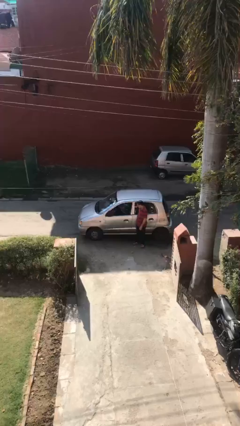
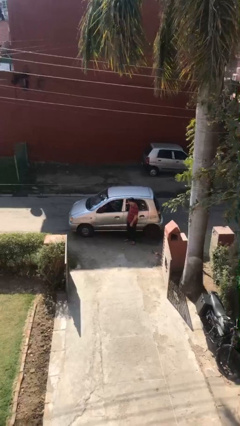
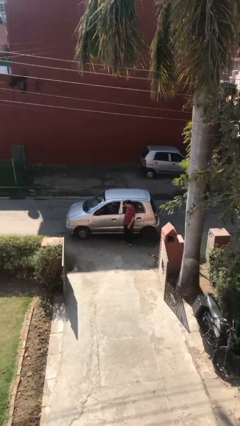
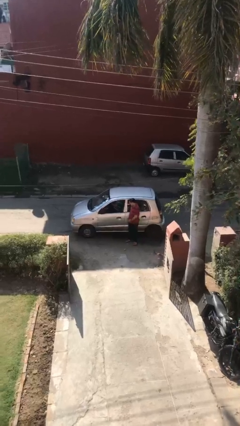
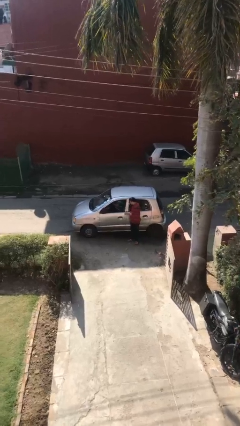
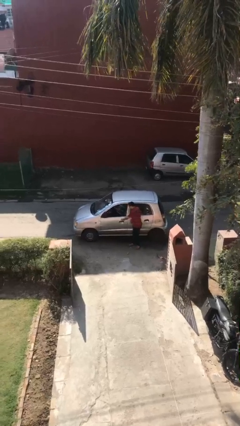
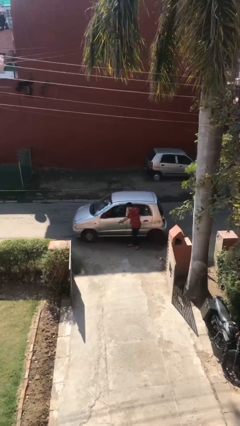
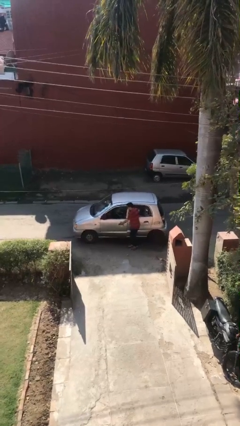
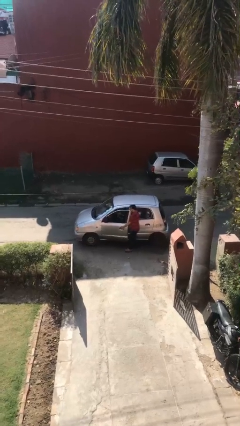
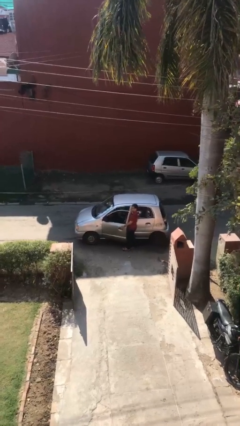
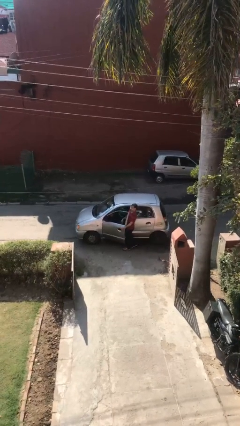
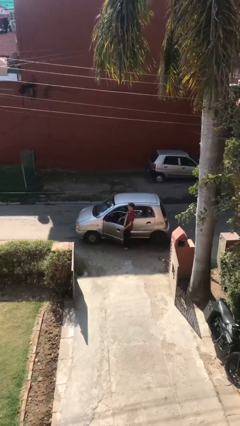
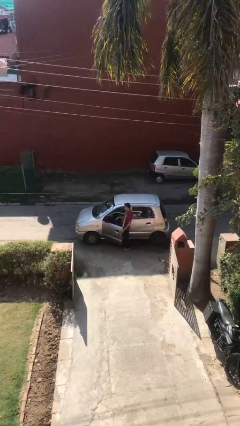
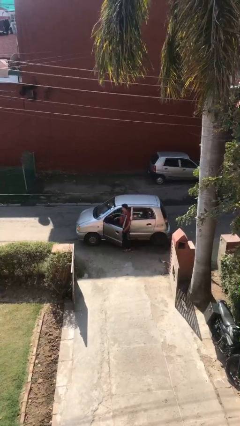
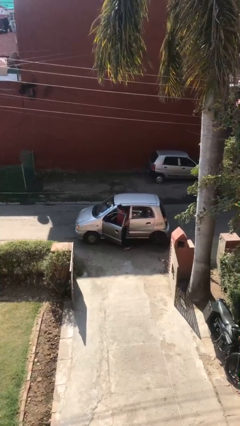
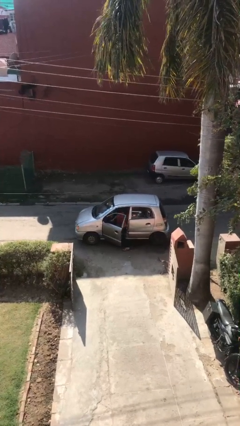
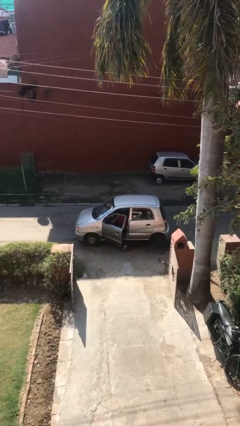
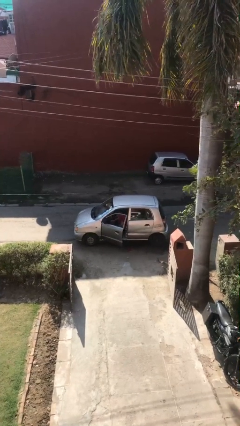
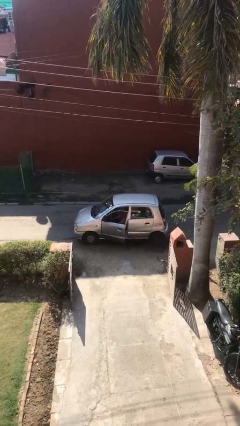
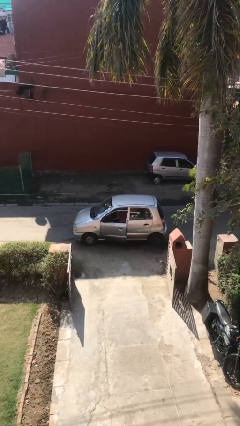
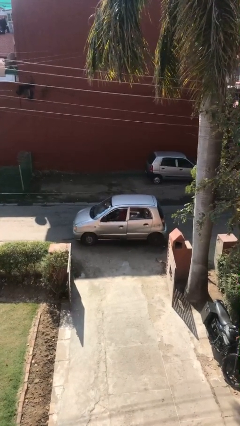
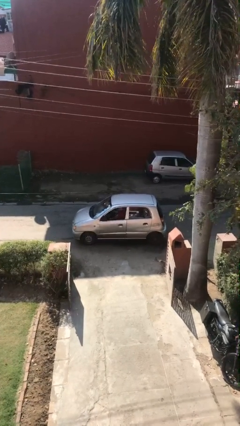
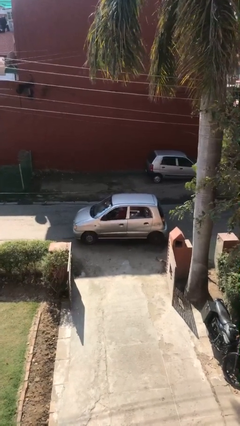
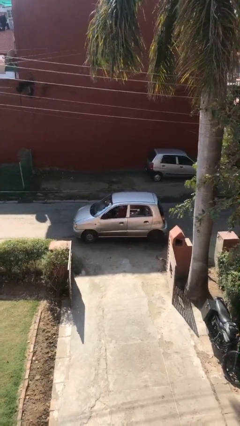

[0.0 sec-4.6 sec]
car picks up person

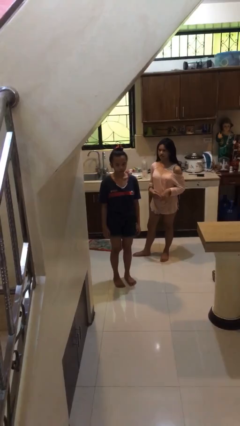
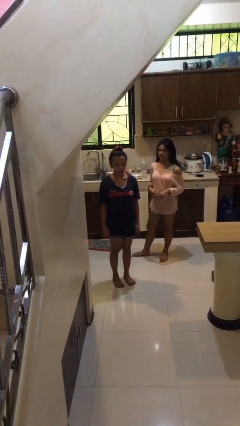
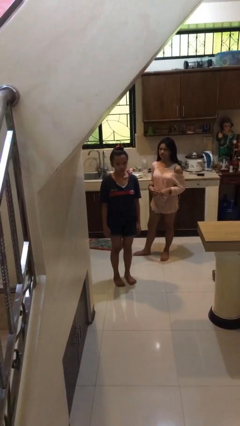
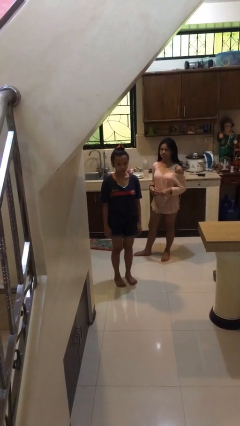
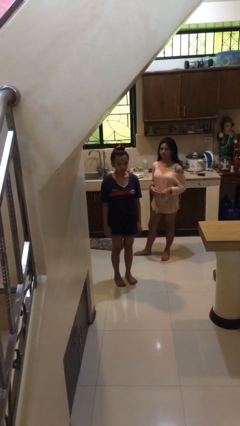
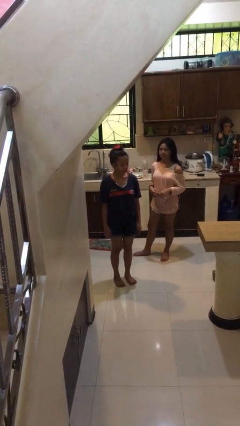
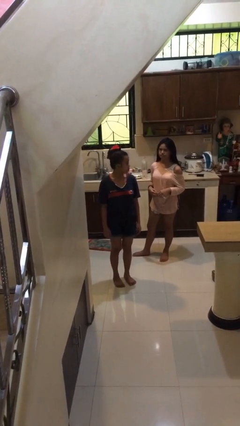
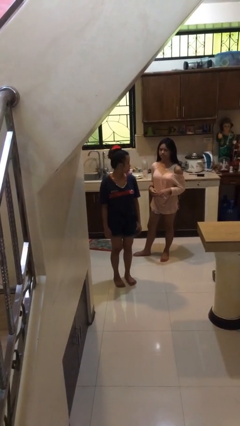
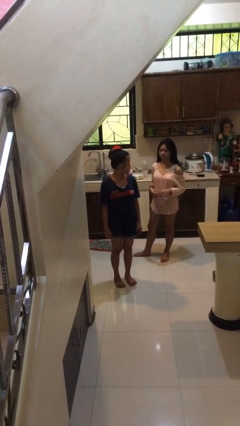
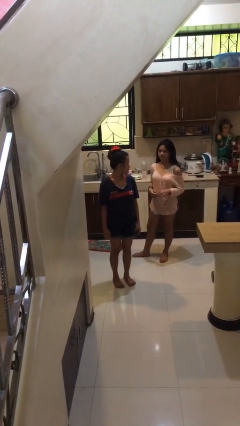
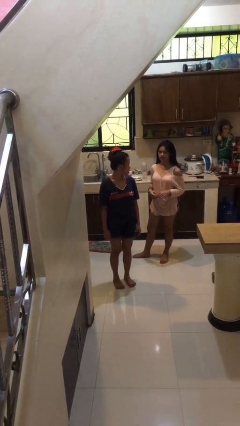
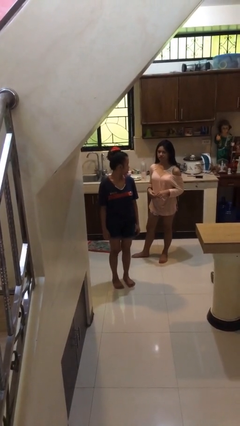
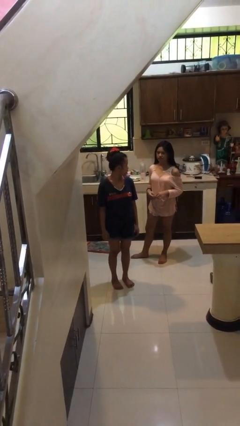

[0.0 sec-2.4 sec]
person looks over shoulder

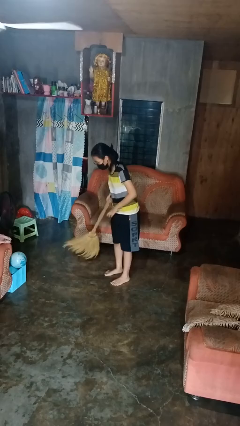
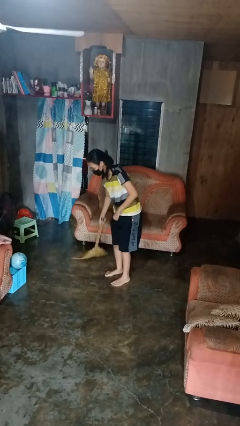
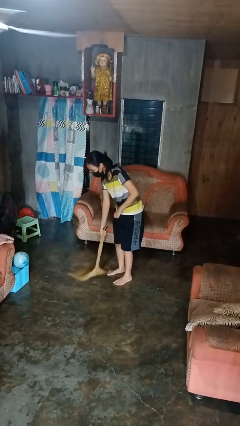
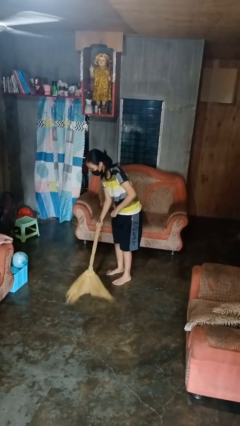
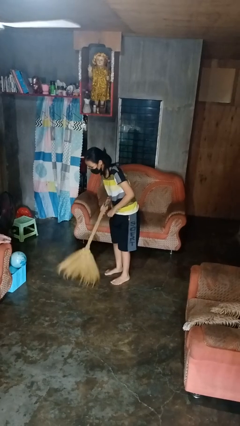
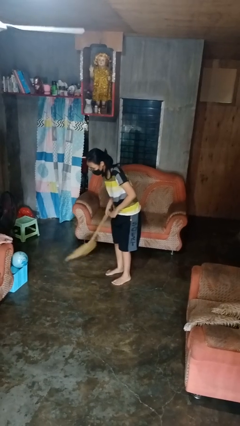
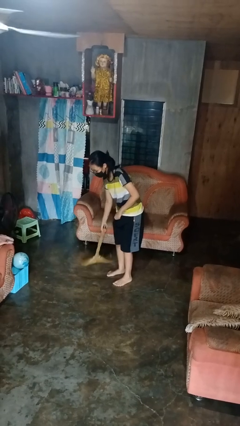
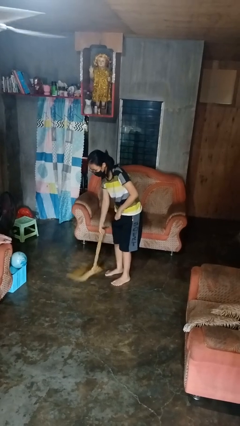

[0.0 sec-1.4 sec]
person sweeps floor

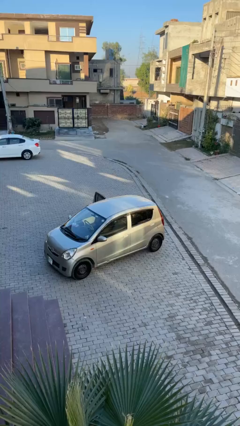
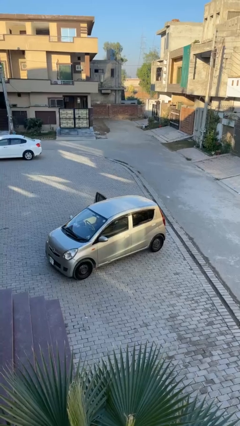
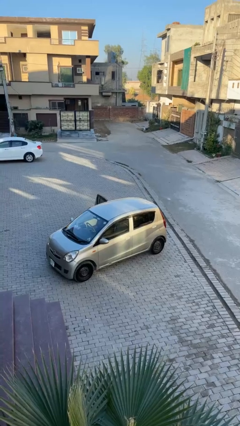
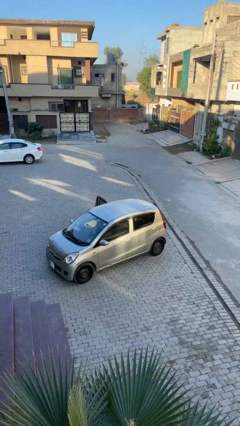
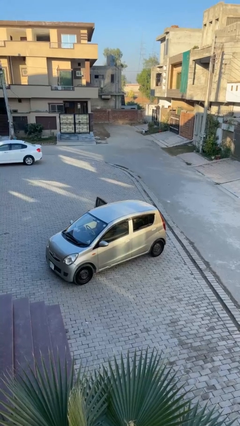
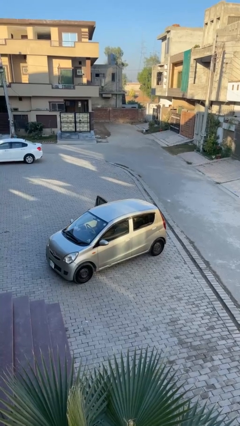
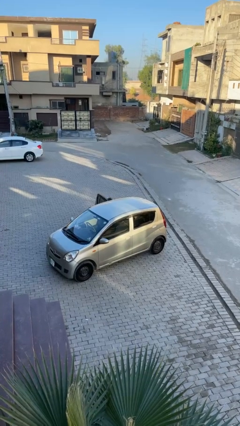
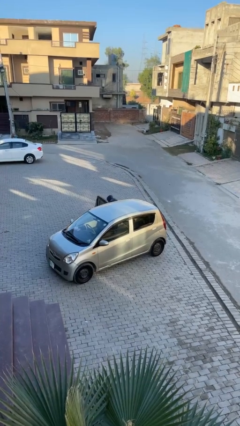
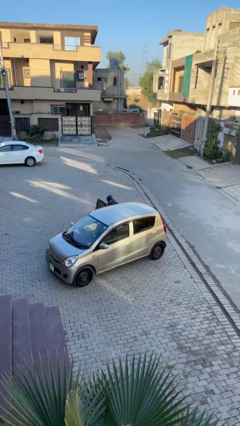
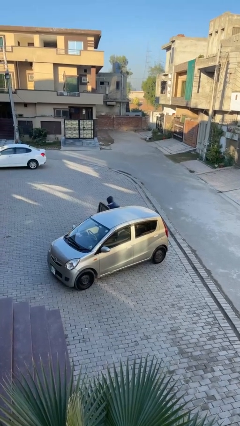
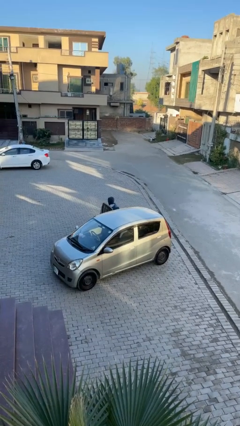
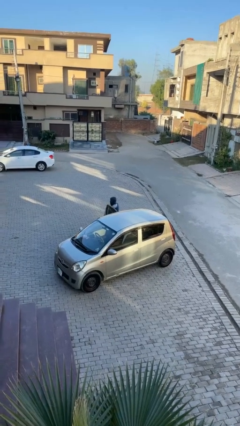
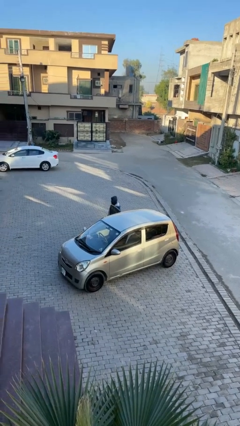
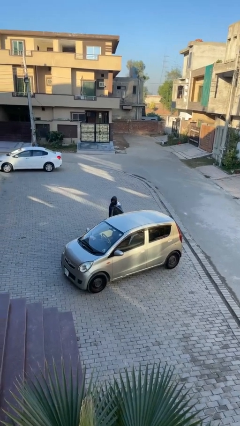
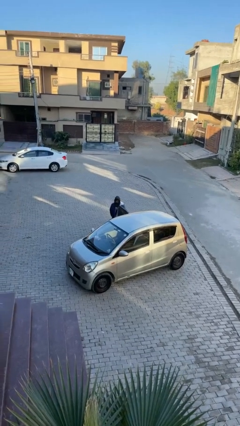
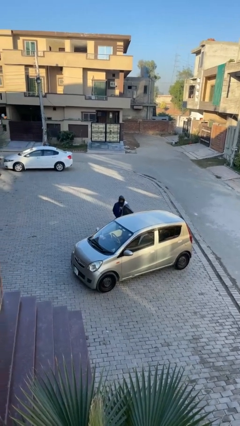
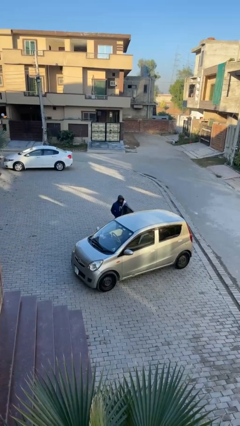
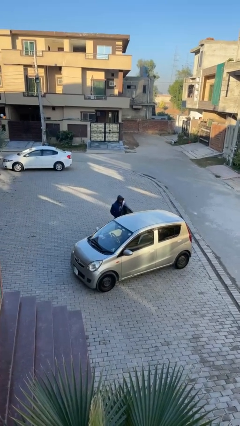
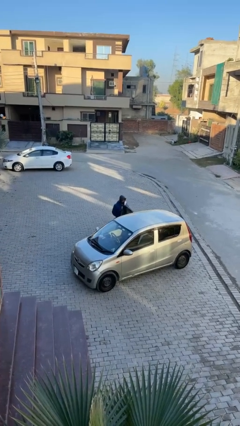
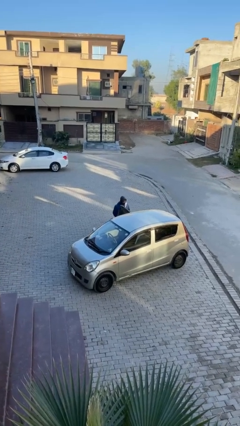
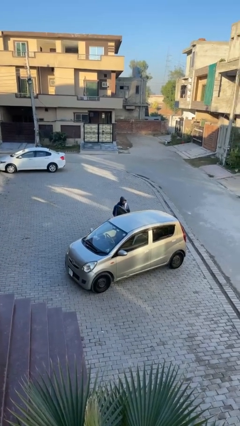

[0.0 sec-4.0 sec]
person exits car

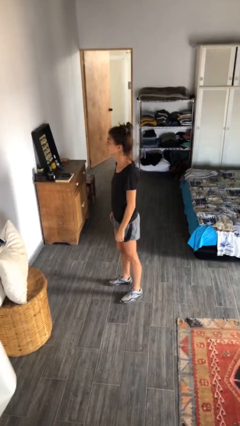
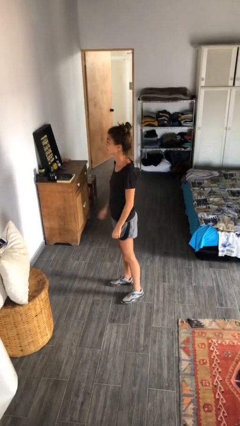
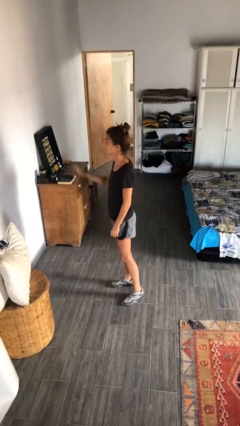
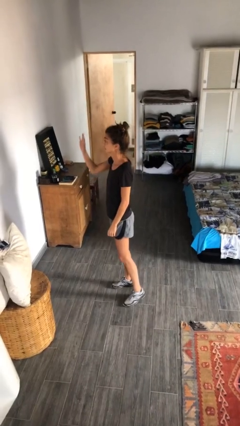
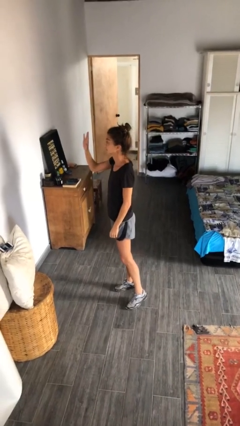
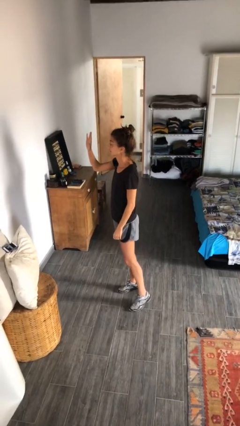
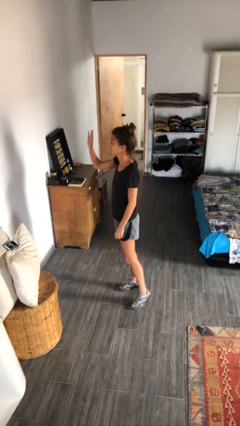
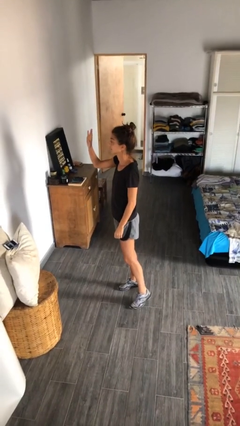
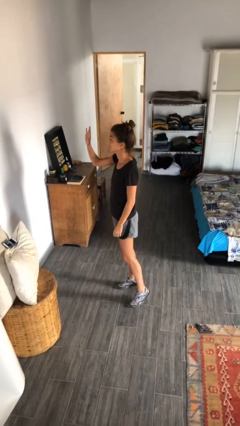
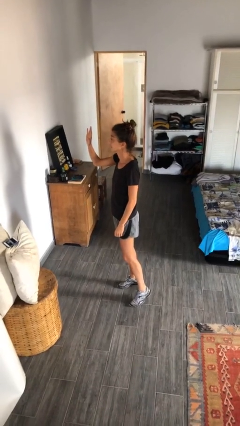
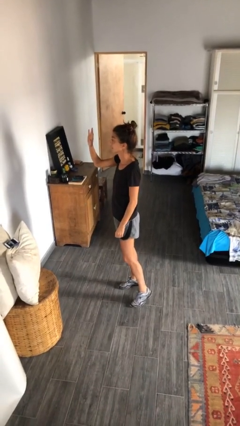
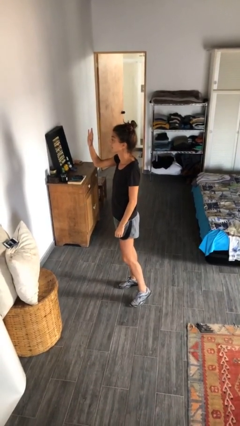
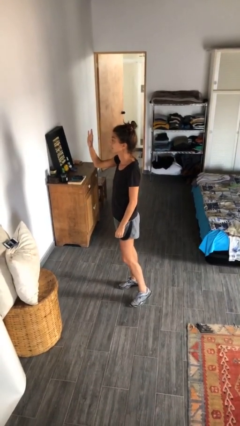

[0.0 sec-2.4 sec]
person gestures raise hand

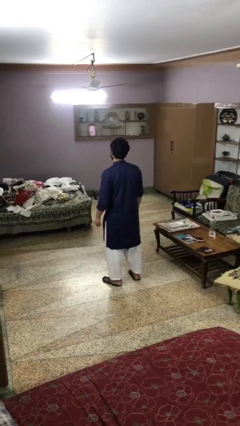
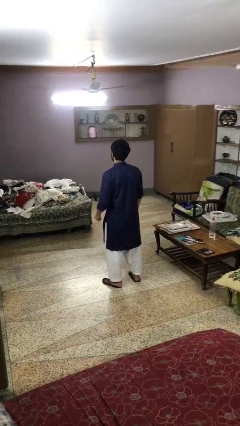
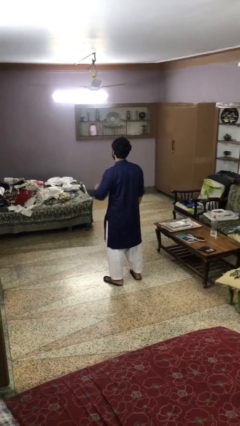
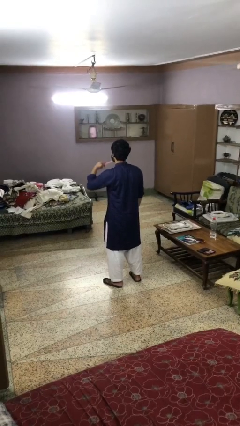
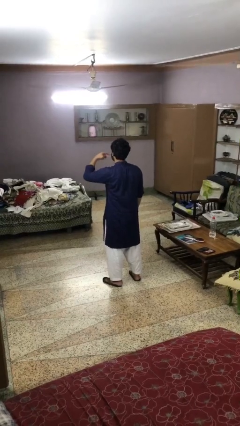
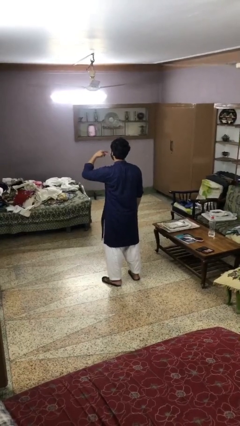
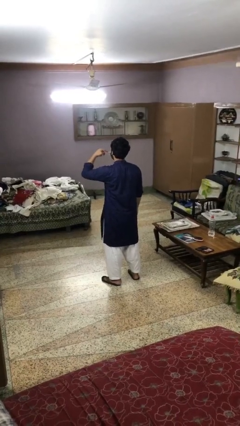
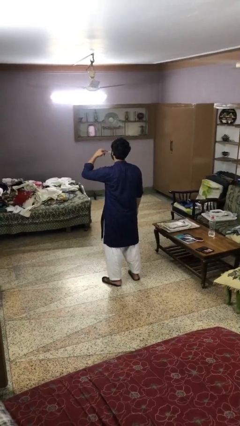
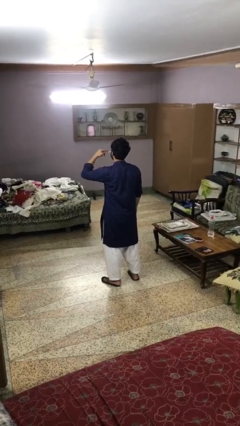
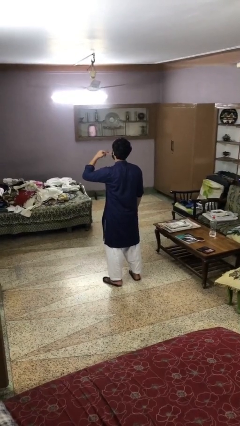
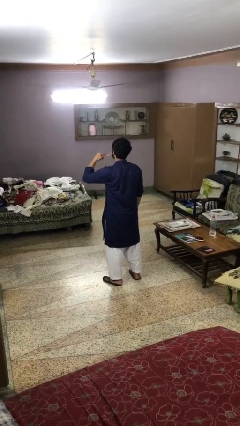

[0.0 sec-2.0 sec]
person brushes teeth

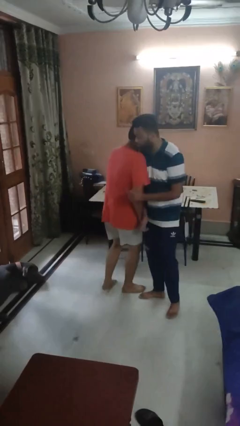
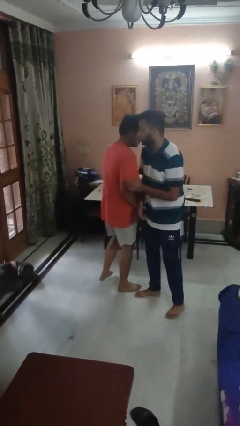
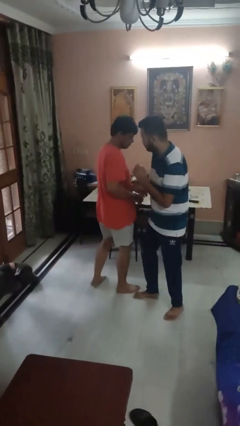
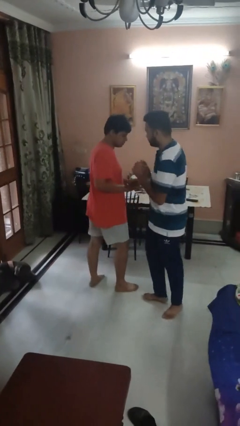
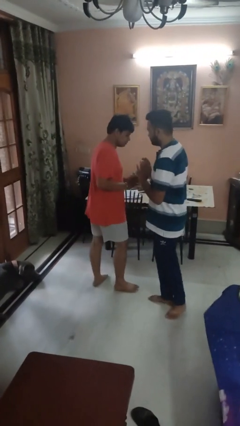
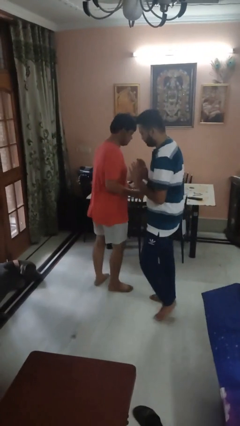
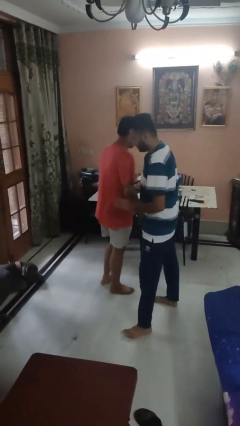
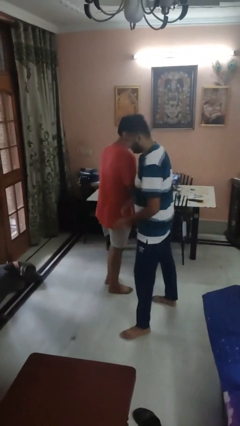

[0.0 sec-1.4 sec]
person bumps into person
